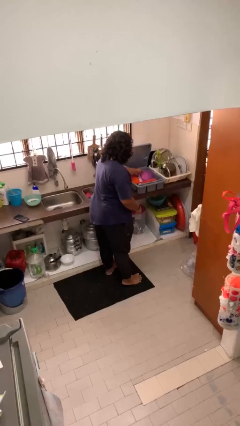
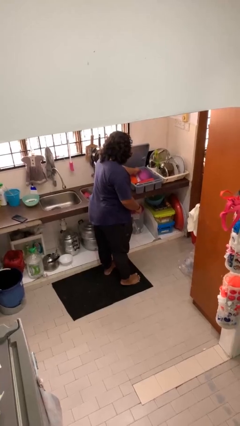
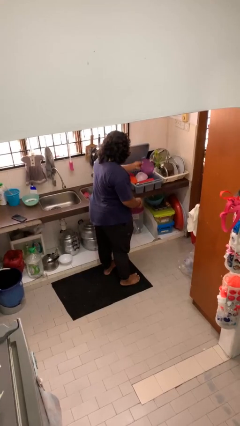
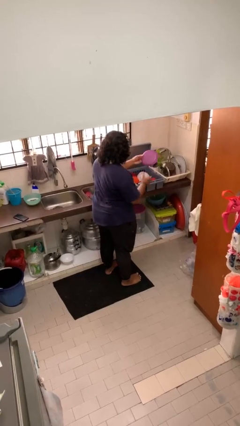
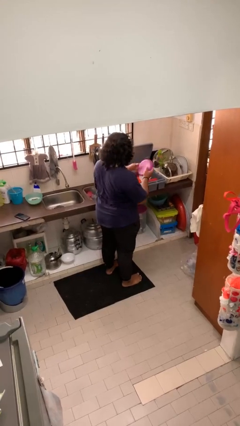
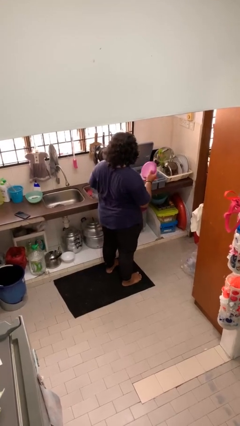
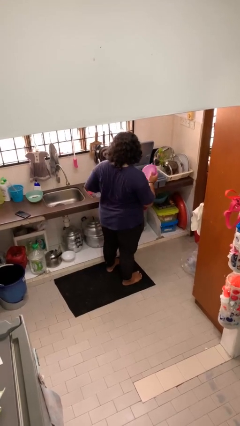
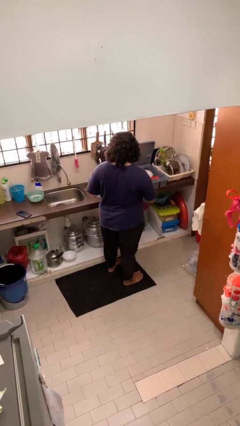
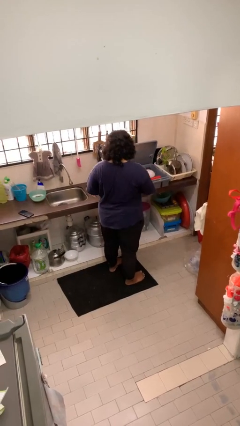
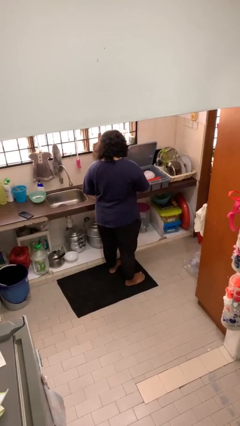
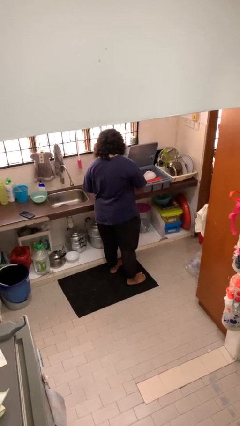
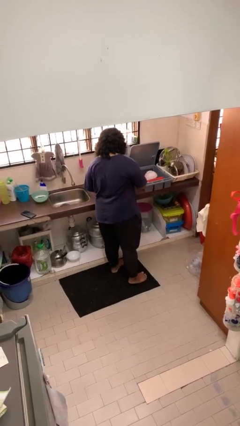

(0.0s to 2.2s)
person unloads dishwasher

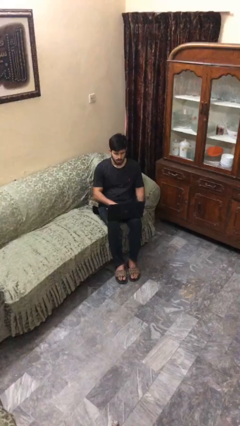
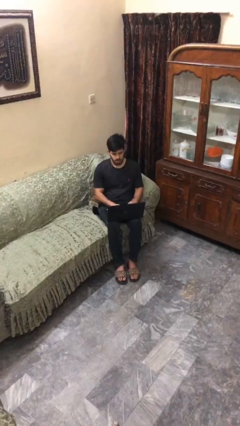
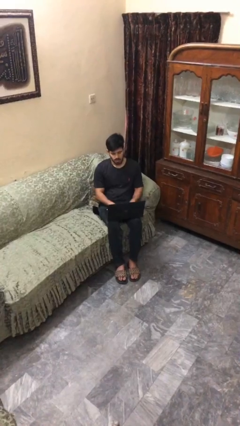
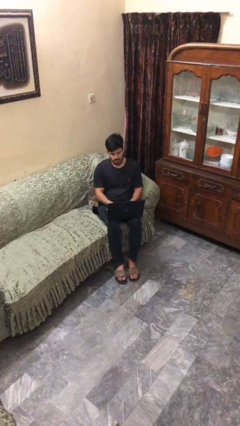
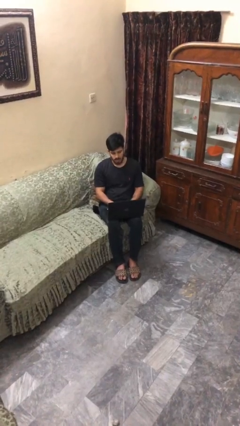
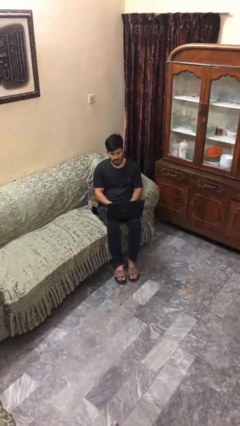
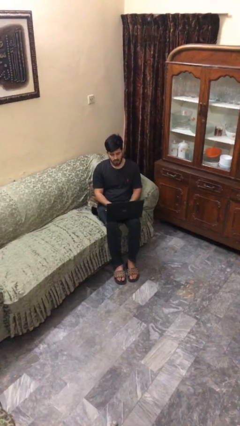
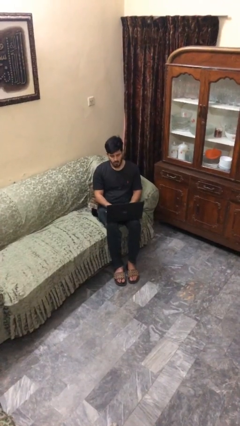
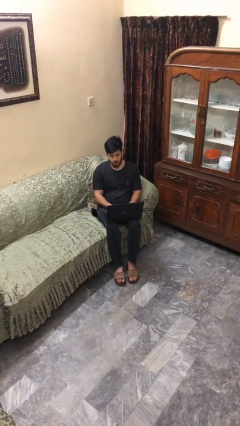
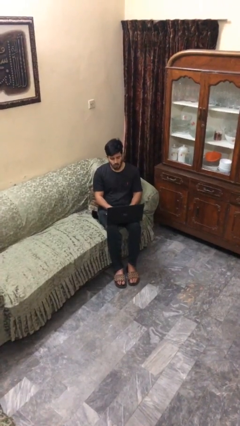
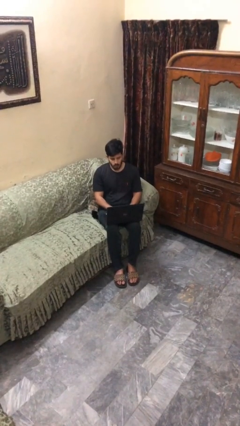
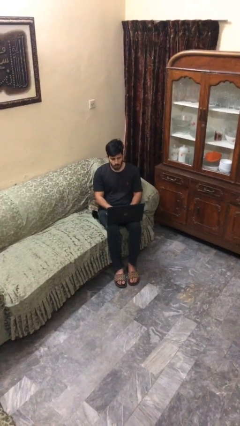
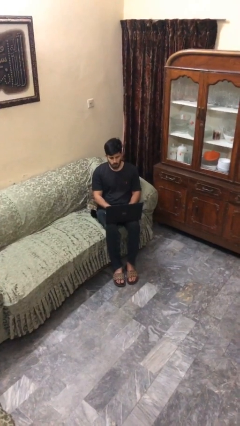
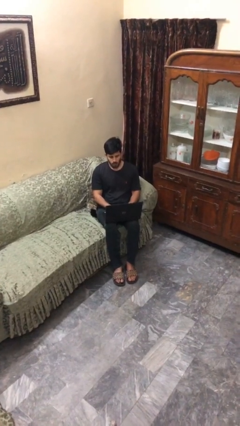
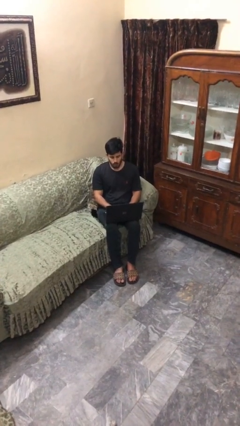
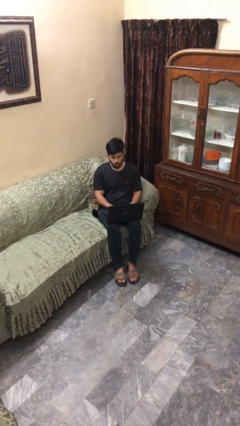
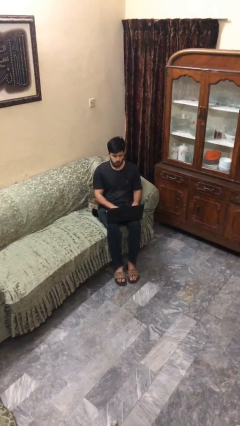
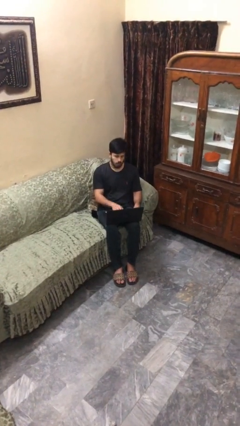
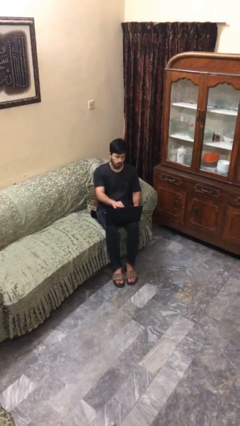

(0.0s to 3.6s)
person interacts with laptop

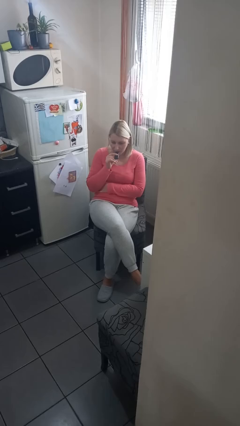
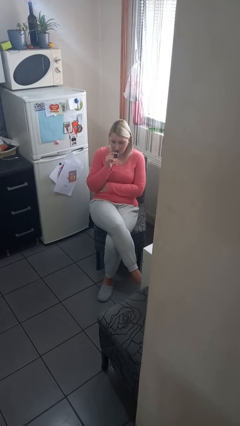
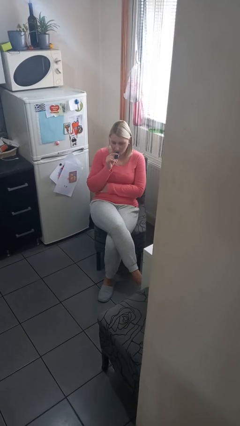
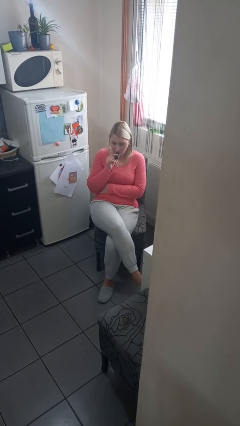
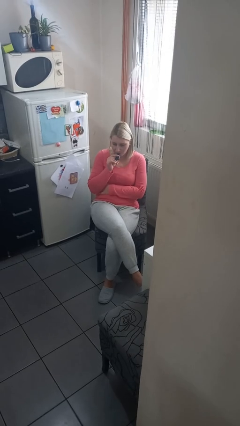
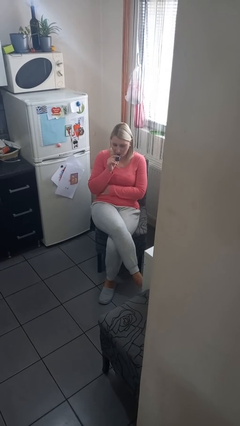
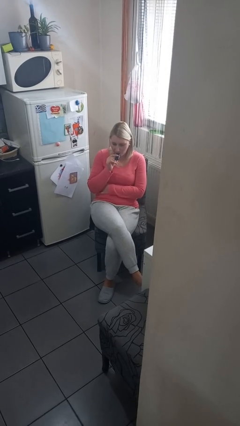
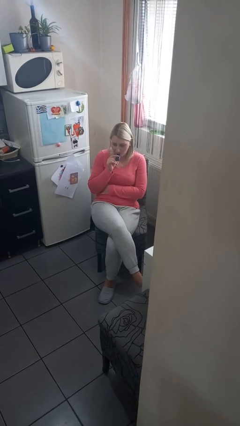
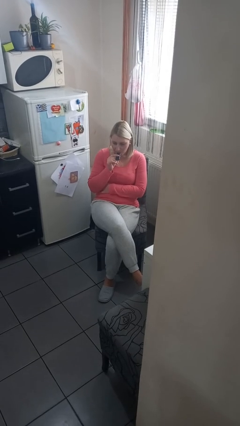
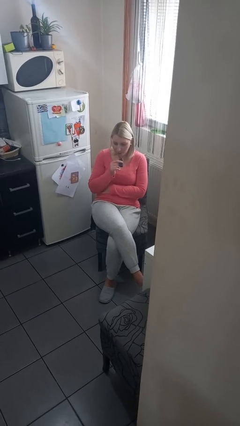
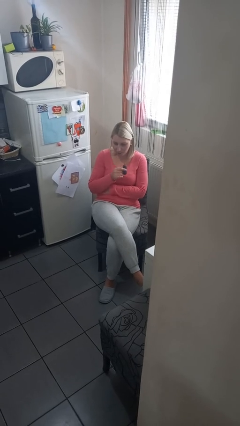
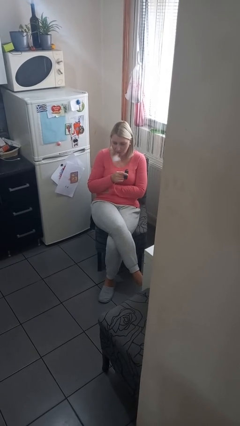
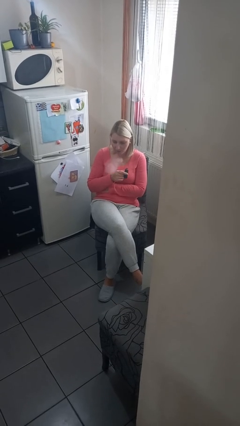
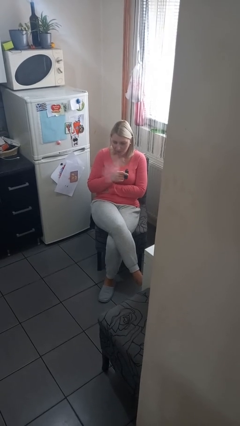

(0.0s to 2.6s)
person vapes

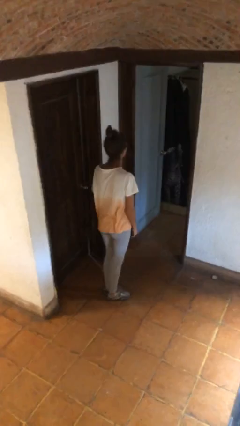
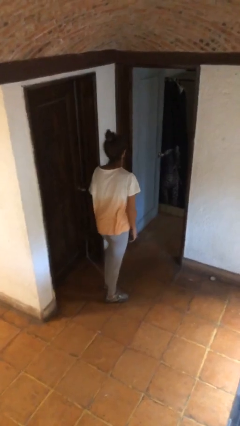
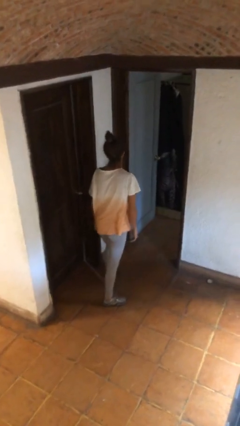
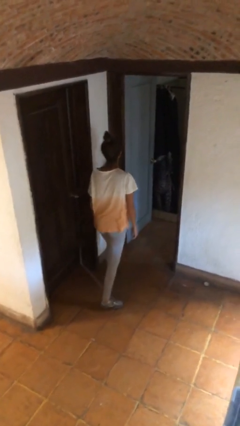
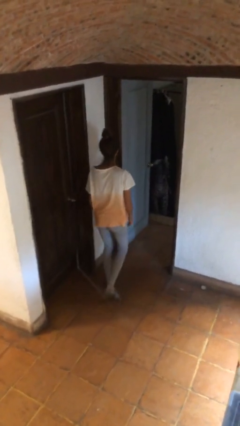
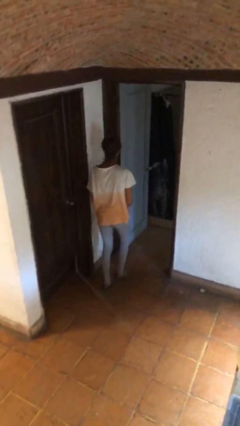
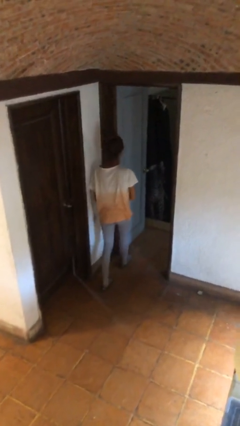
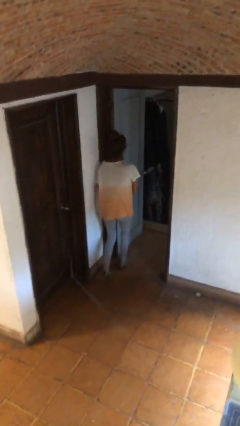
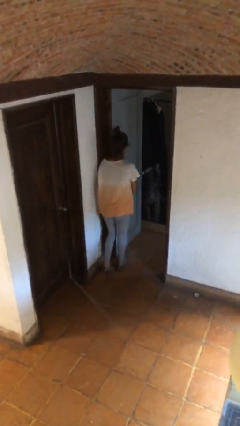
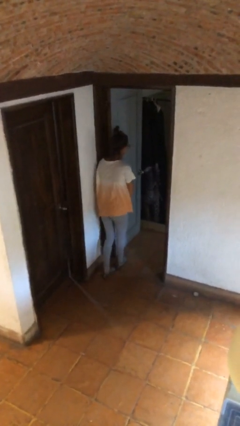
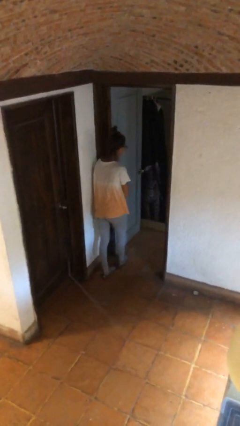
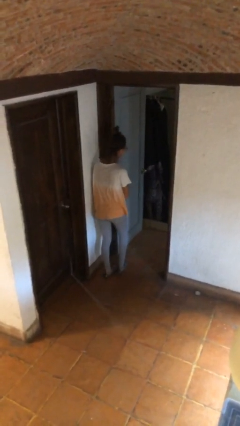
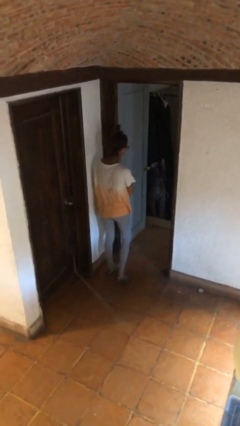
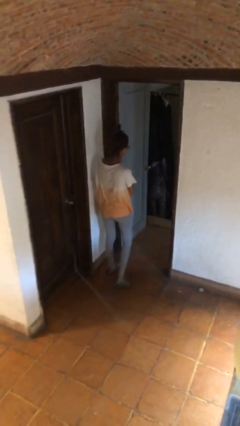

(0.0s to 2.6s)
person bumps into wall

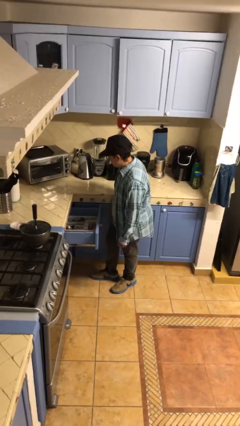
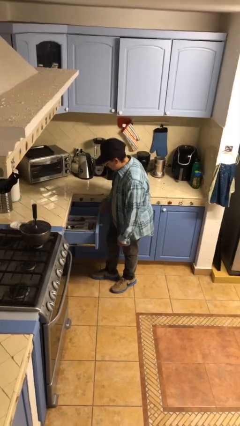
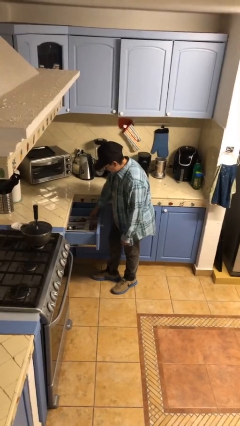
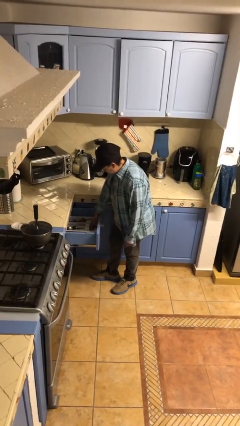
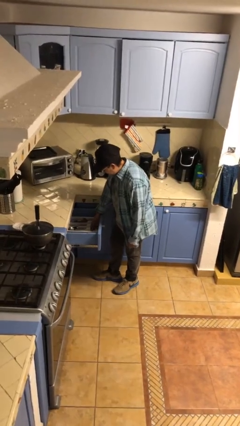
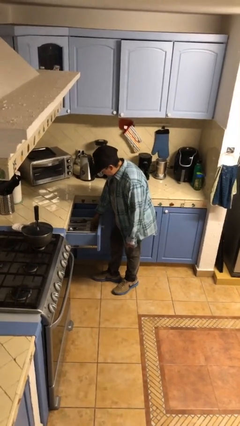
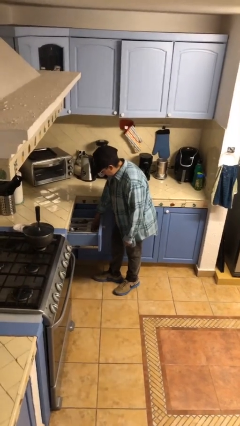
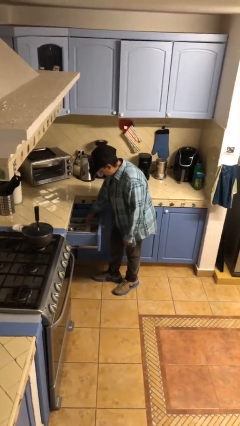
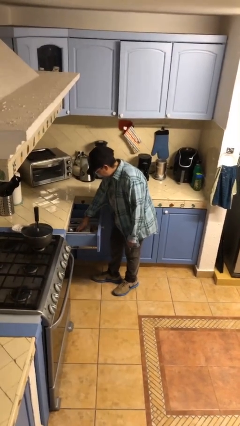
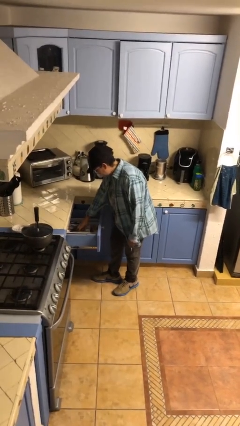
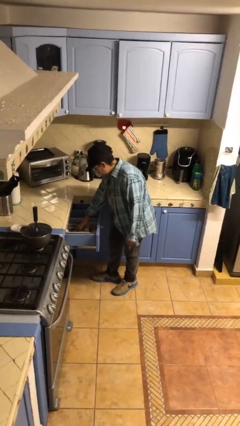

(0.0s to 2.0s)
person searches in kitchen drawer

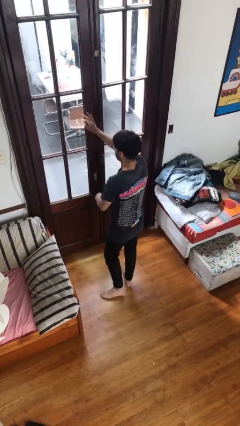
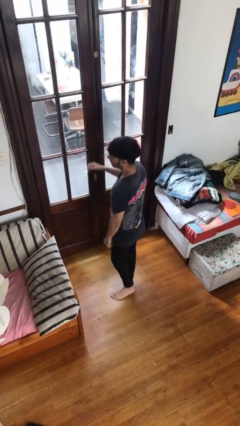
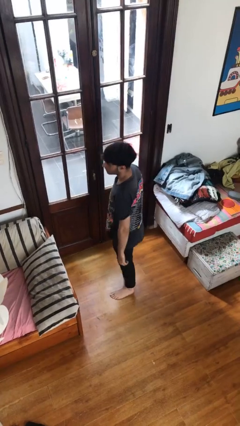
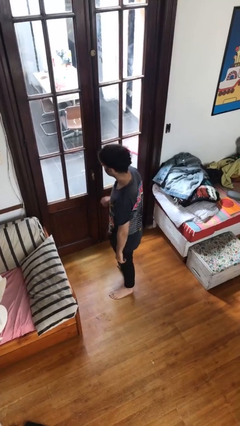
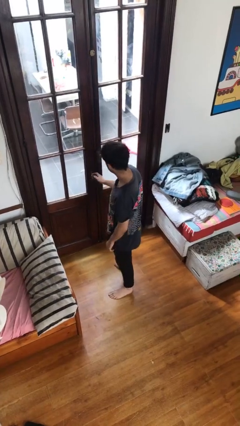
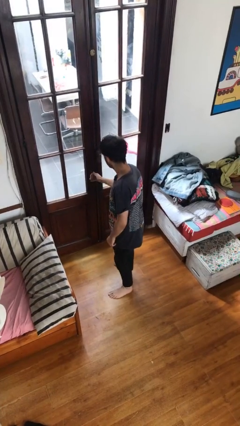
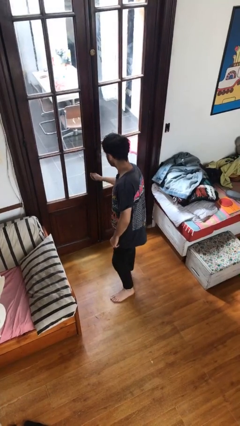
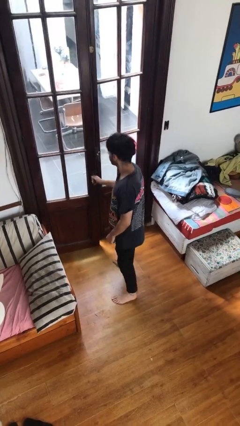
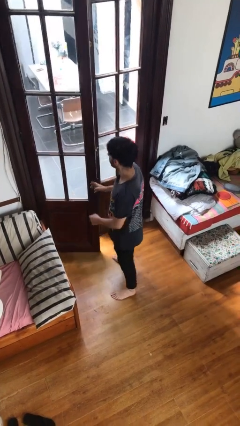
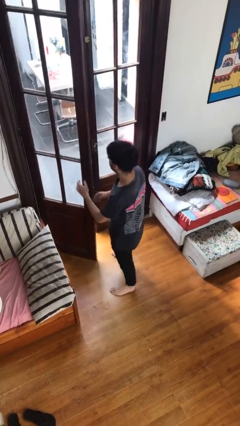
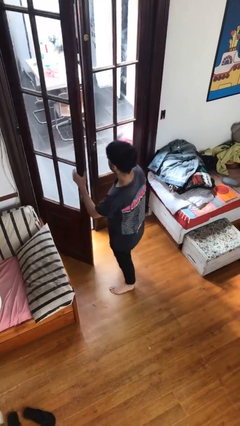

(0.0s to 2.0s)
person opens facility door

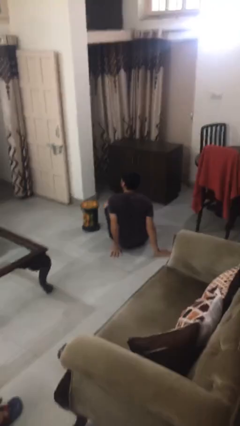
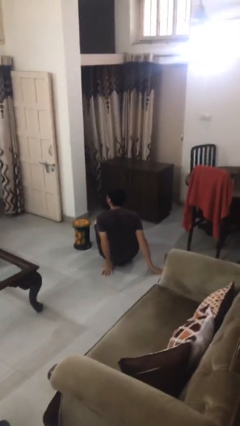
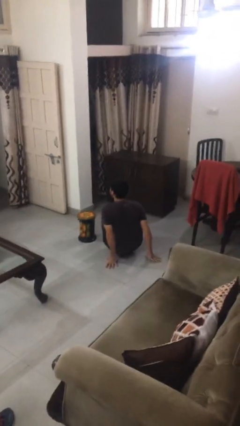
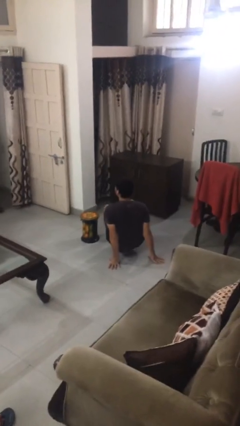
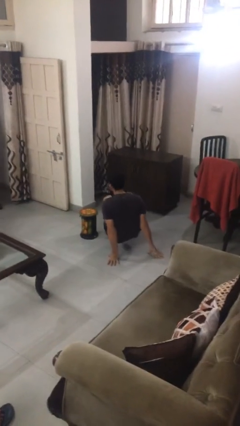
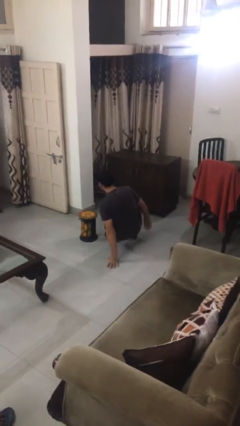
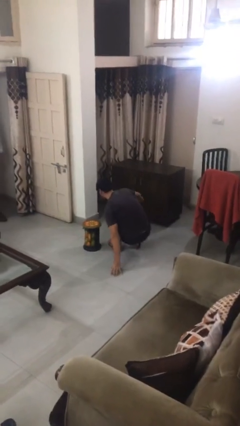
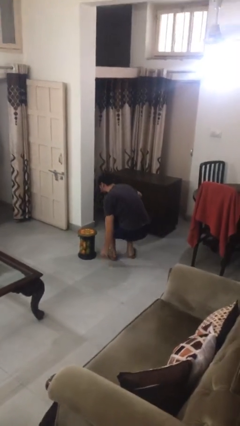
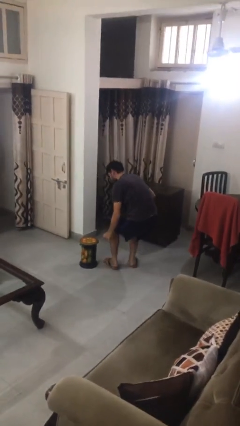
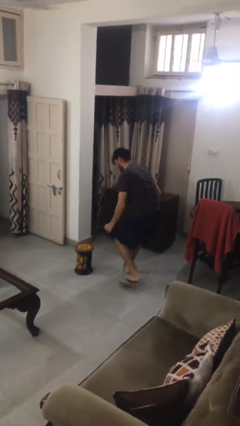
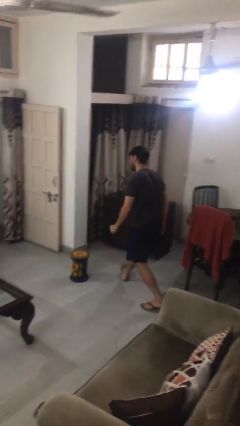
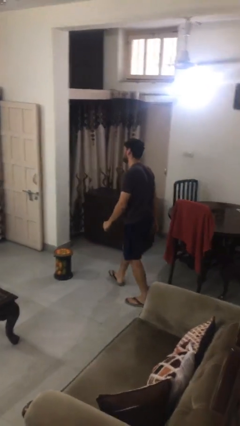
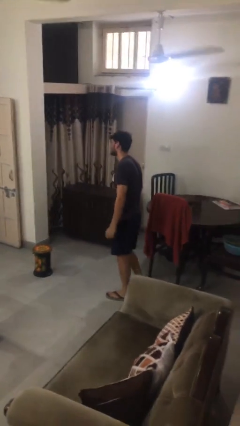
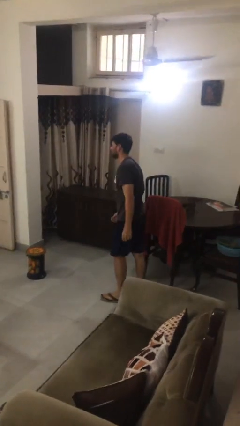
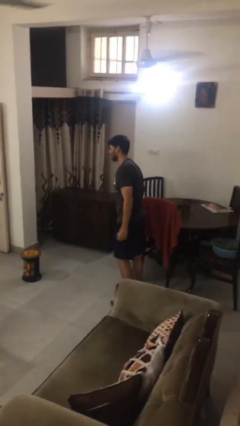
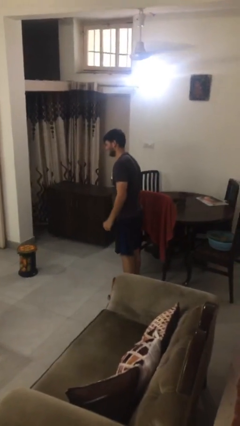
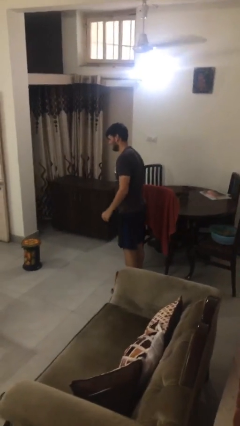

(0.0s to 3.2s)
person stands up from floor
